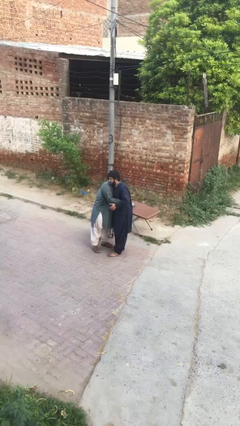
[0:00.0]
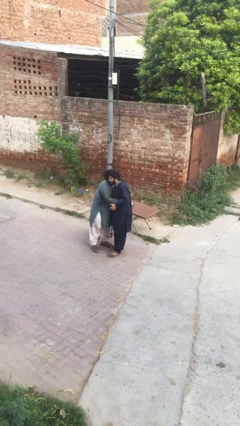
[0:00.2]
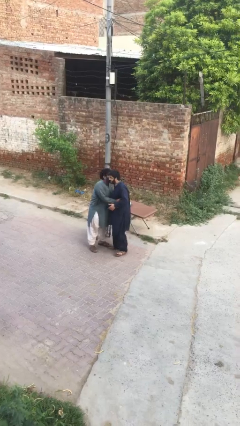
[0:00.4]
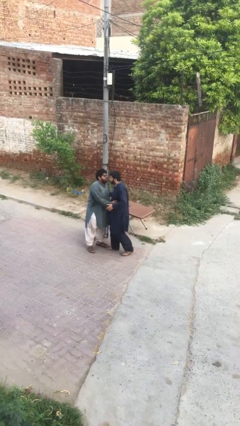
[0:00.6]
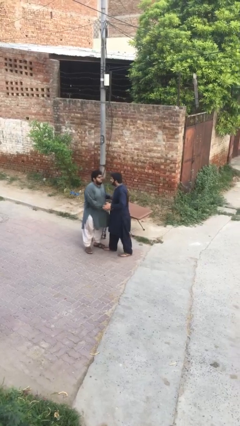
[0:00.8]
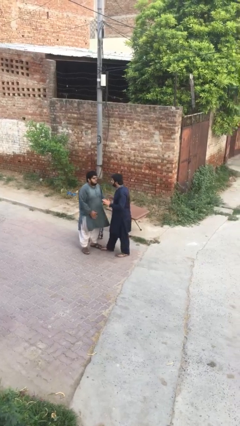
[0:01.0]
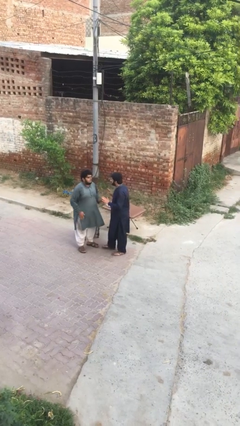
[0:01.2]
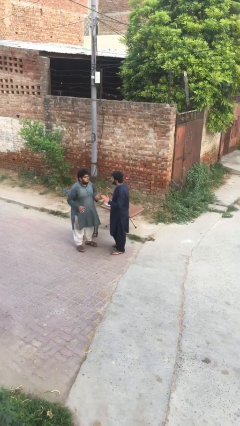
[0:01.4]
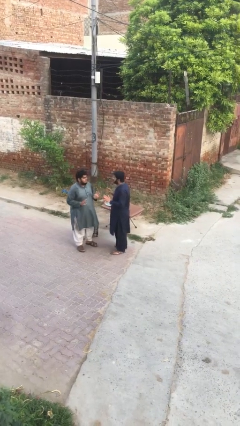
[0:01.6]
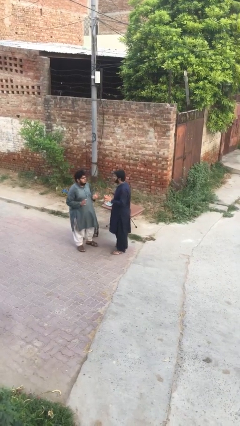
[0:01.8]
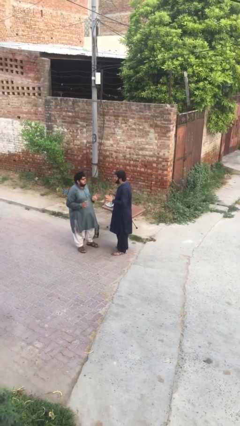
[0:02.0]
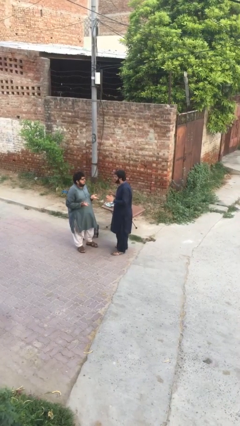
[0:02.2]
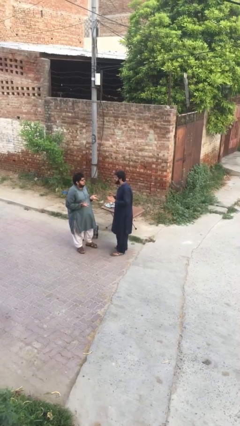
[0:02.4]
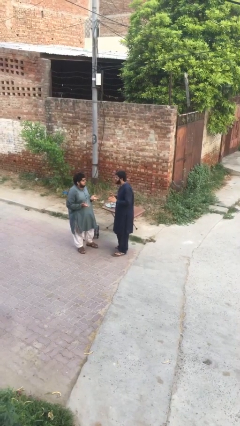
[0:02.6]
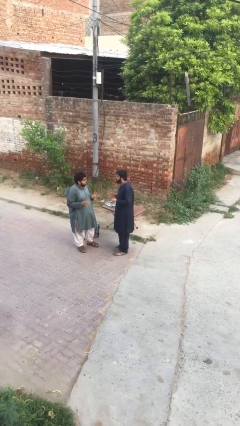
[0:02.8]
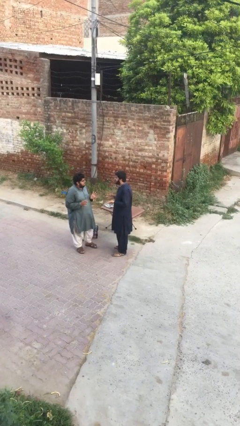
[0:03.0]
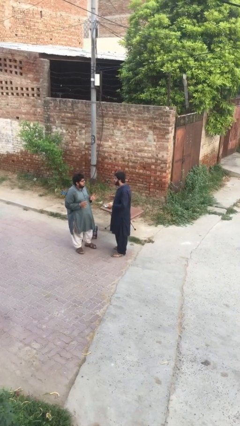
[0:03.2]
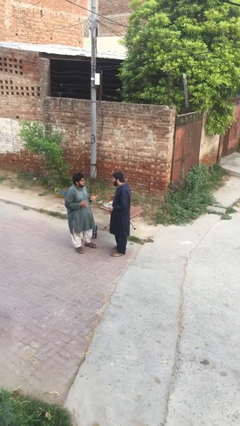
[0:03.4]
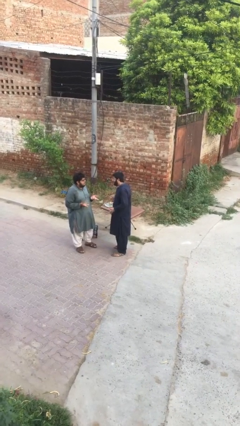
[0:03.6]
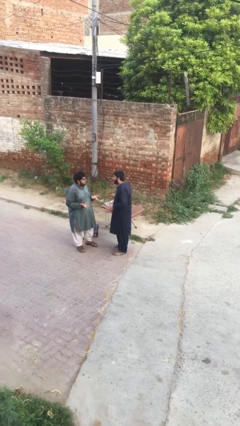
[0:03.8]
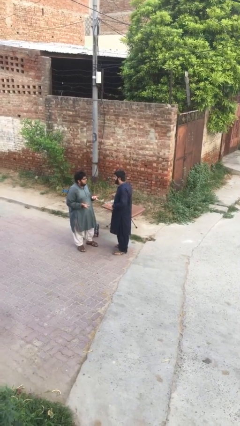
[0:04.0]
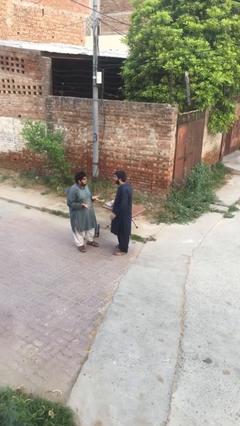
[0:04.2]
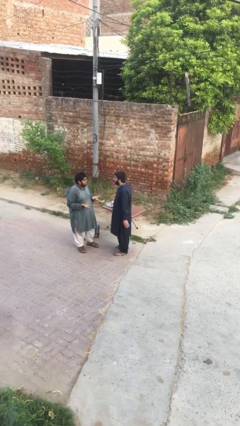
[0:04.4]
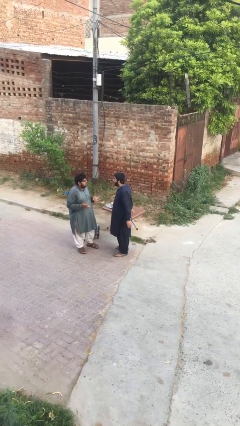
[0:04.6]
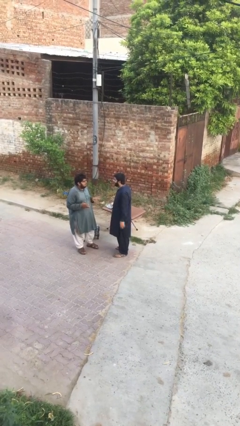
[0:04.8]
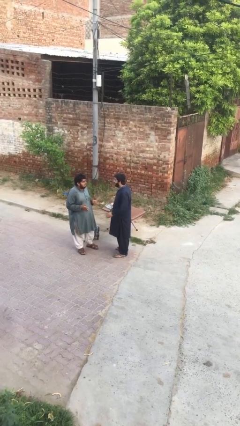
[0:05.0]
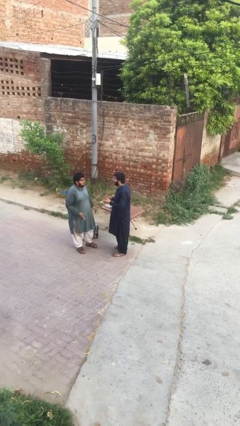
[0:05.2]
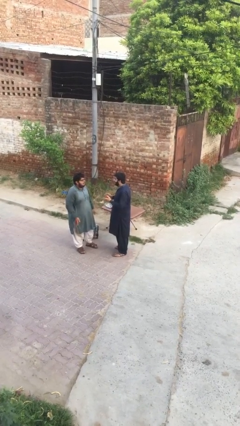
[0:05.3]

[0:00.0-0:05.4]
person talks to person

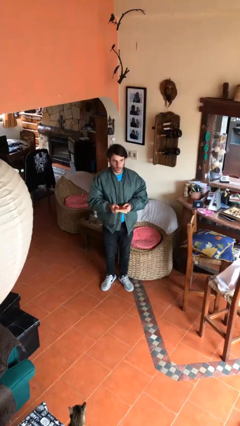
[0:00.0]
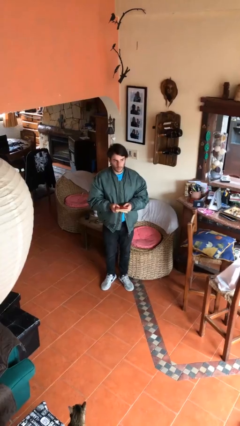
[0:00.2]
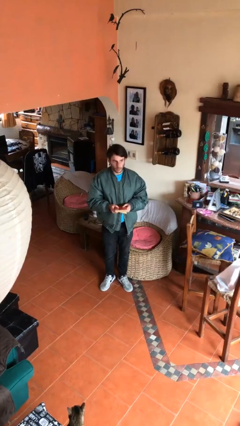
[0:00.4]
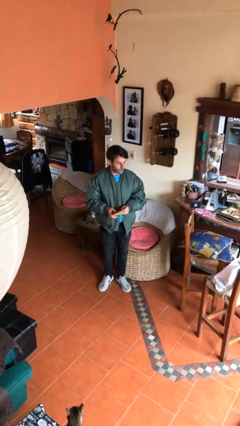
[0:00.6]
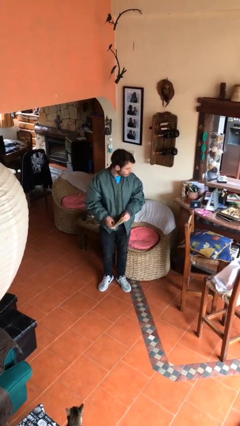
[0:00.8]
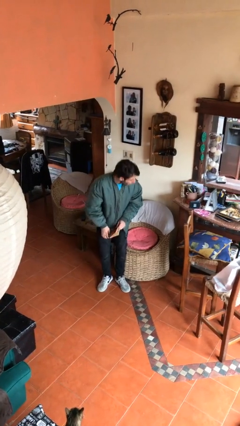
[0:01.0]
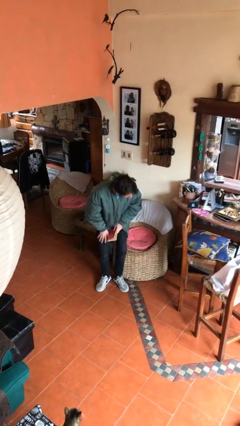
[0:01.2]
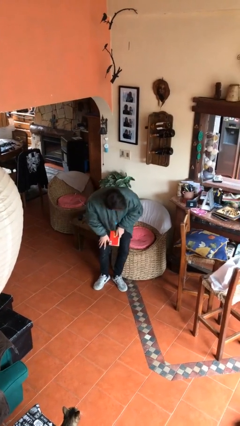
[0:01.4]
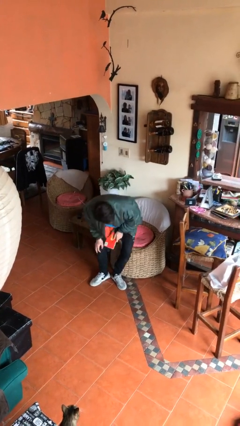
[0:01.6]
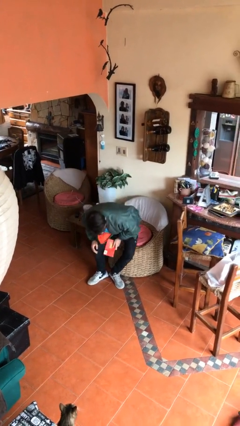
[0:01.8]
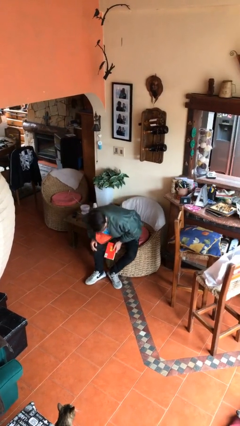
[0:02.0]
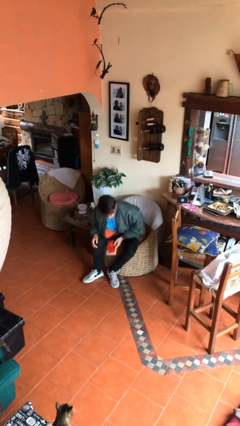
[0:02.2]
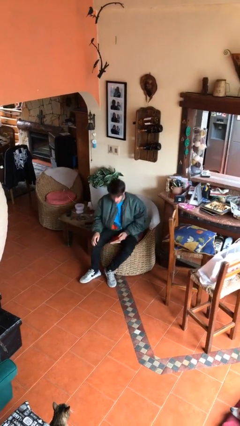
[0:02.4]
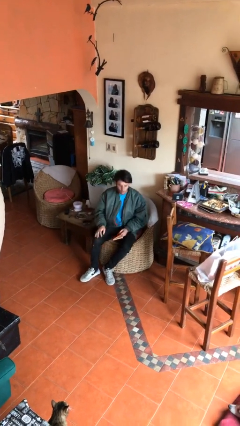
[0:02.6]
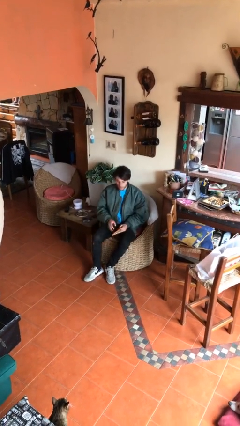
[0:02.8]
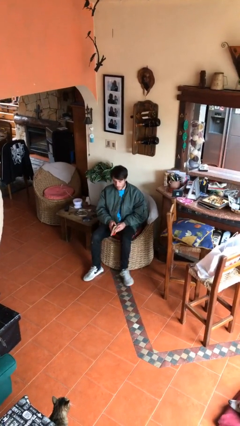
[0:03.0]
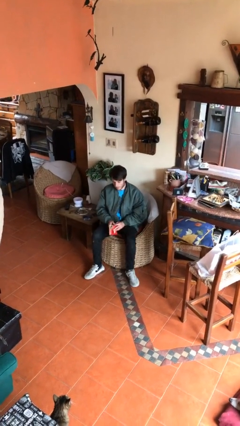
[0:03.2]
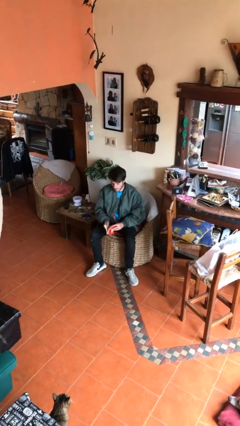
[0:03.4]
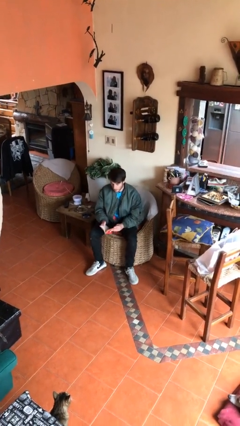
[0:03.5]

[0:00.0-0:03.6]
person sits down

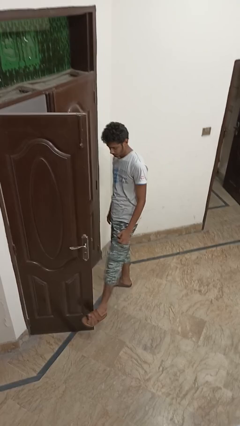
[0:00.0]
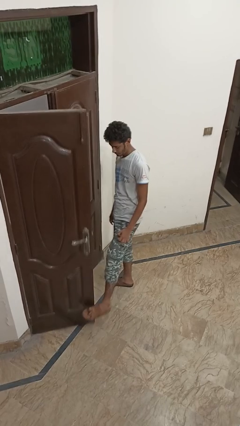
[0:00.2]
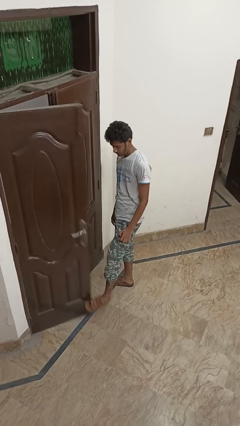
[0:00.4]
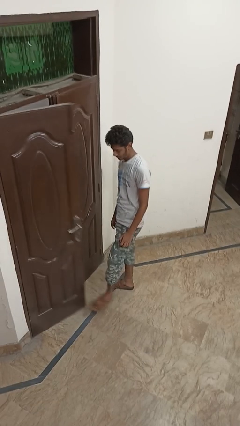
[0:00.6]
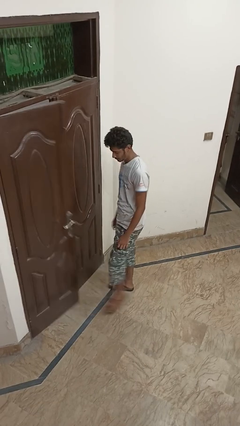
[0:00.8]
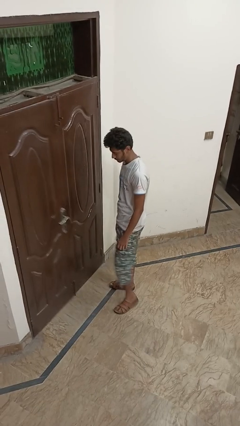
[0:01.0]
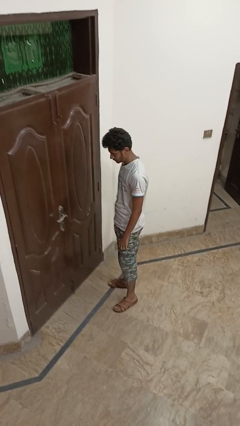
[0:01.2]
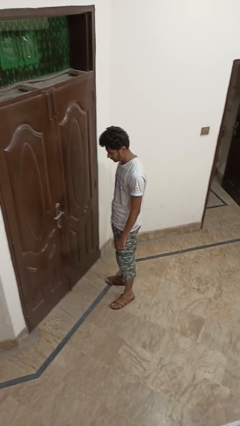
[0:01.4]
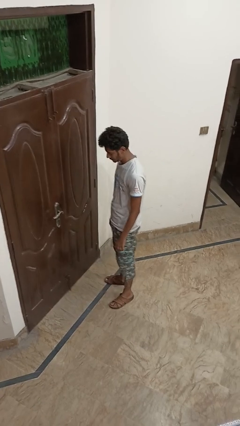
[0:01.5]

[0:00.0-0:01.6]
person closes door with foot

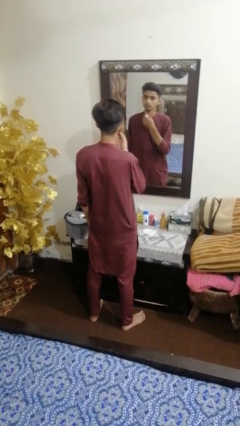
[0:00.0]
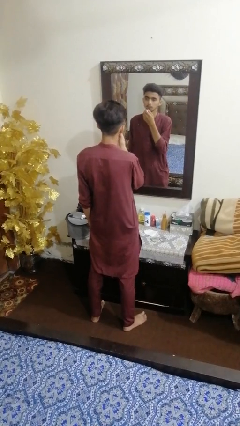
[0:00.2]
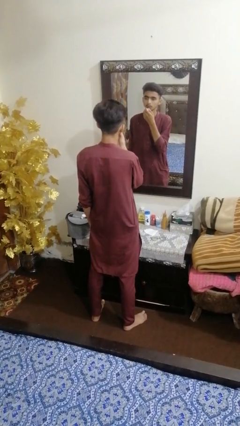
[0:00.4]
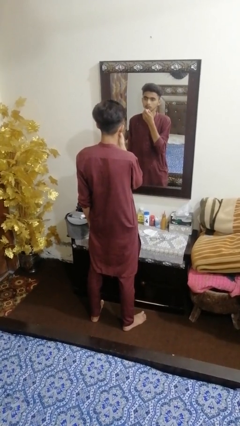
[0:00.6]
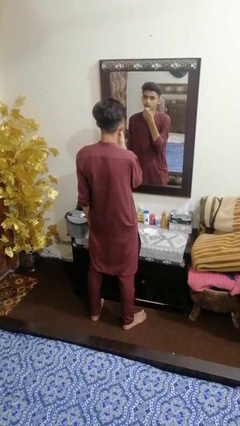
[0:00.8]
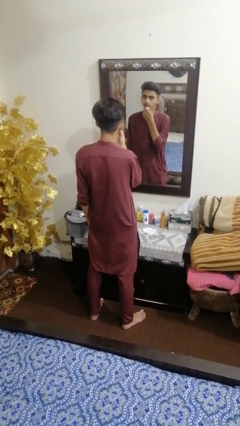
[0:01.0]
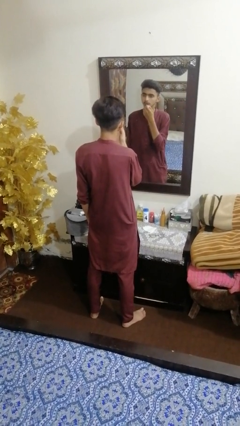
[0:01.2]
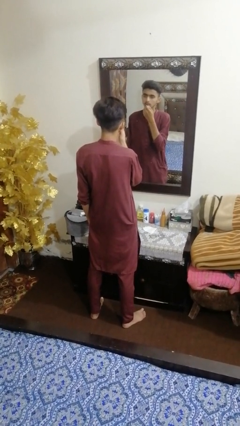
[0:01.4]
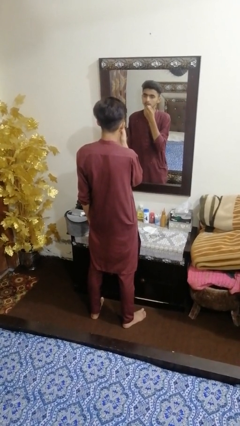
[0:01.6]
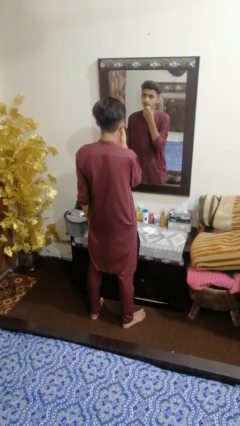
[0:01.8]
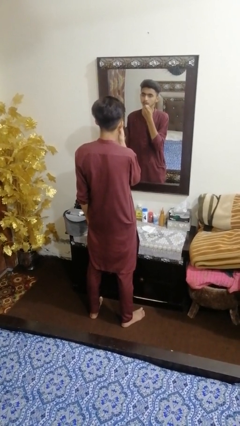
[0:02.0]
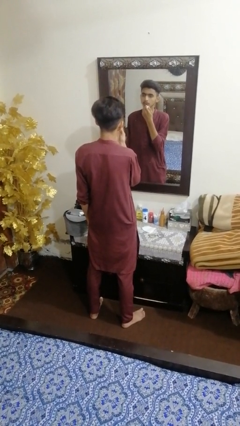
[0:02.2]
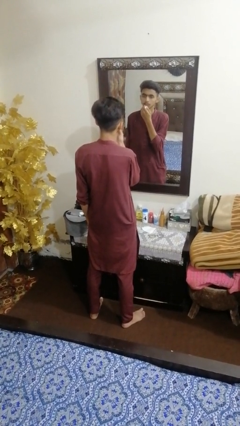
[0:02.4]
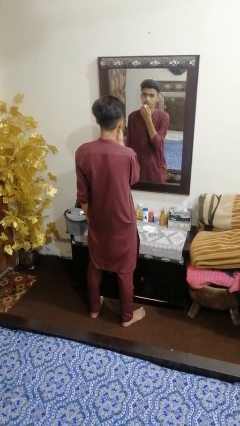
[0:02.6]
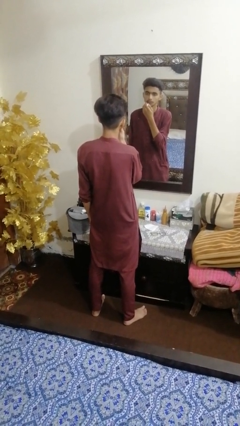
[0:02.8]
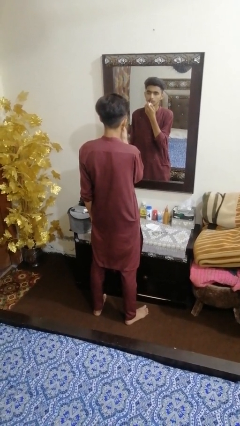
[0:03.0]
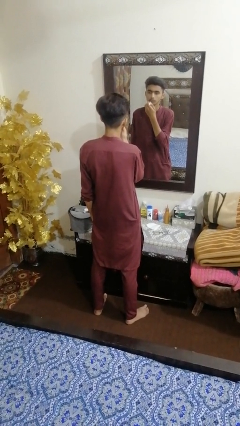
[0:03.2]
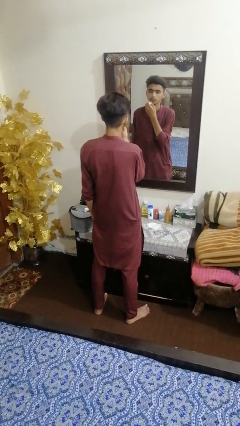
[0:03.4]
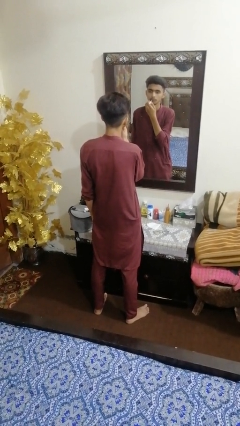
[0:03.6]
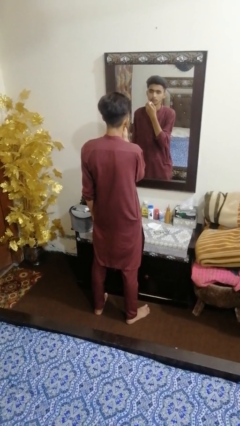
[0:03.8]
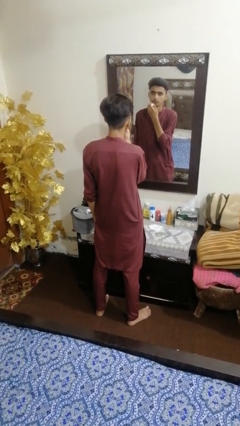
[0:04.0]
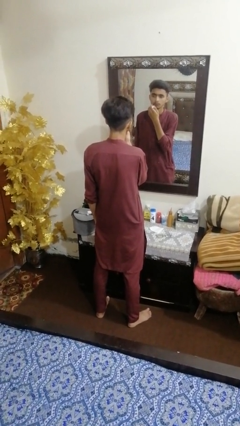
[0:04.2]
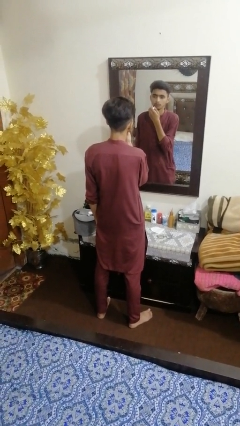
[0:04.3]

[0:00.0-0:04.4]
person applies lip makeup

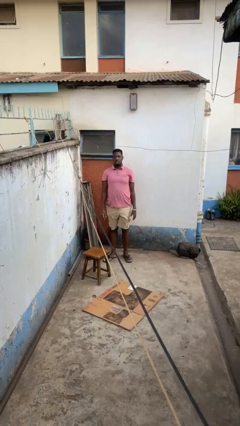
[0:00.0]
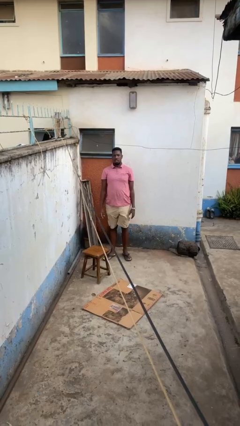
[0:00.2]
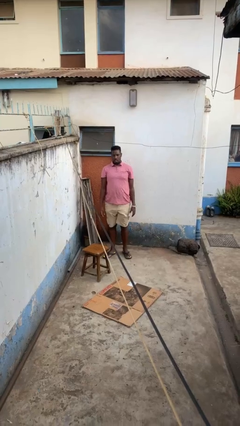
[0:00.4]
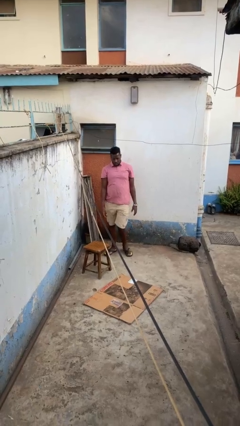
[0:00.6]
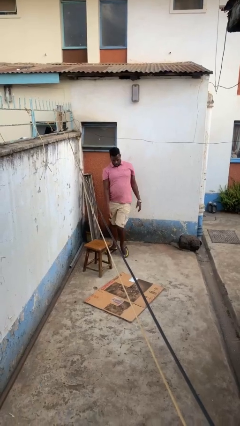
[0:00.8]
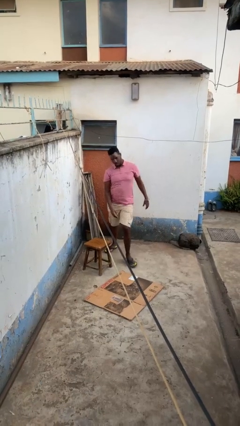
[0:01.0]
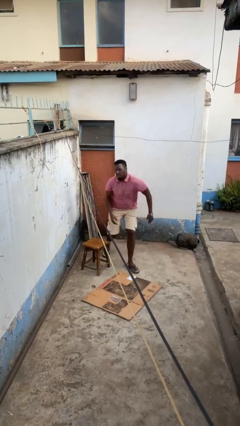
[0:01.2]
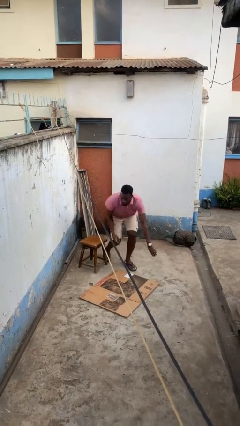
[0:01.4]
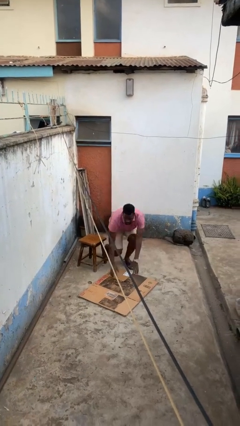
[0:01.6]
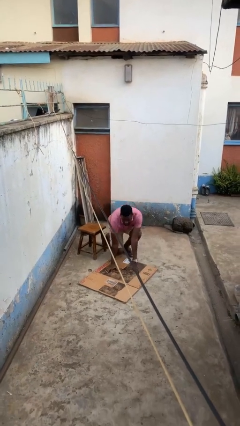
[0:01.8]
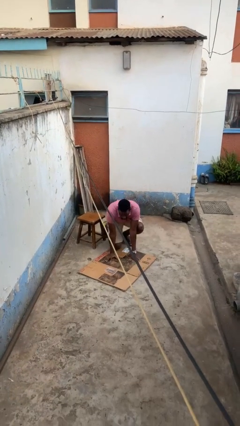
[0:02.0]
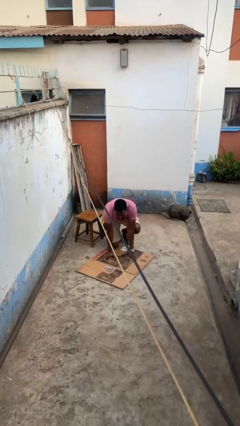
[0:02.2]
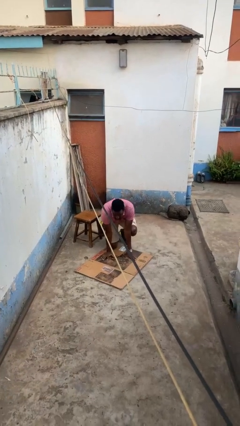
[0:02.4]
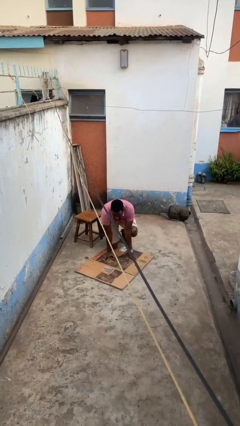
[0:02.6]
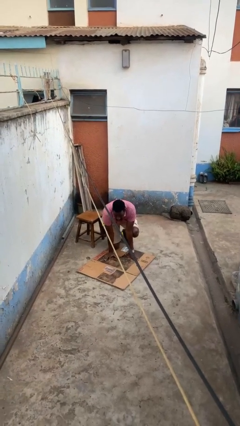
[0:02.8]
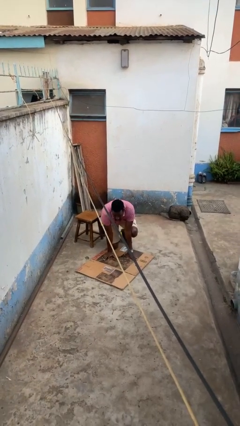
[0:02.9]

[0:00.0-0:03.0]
person trips on object on floor
